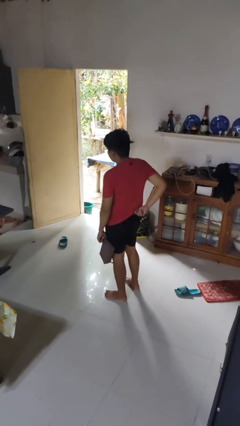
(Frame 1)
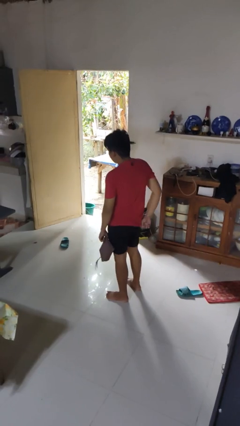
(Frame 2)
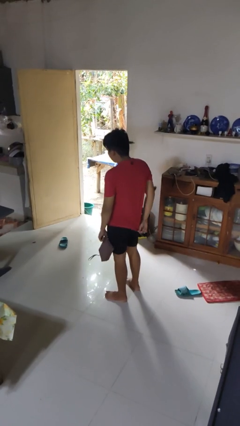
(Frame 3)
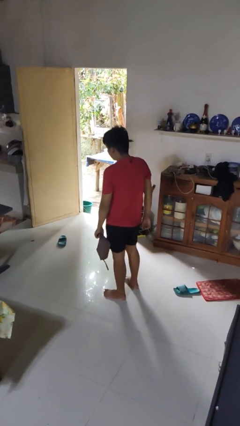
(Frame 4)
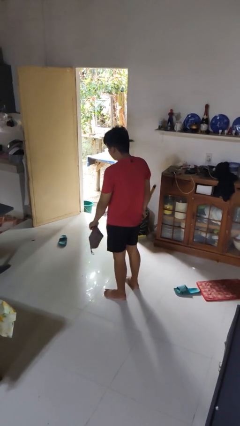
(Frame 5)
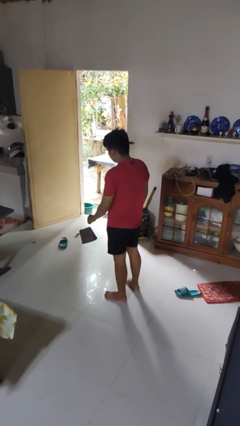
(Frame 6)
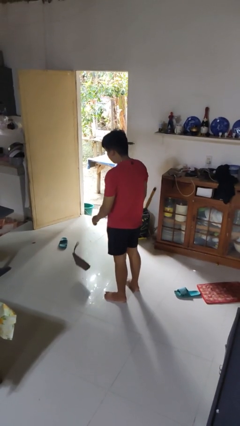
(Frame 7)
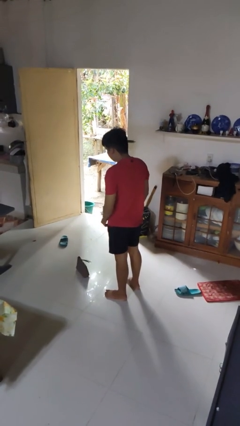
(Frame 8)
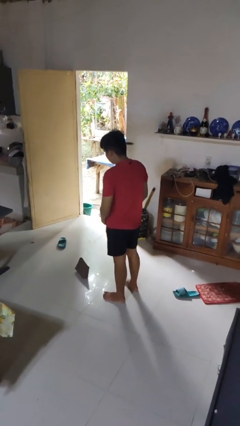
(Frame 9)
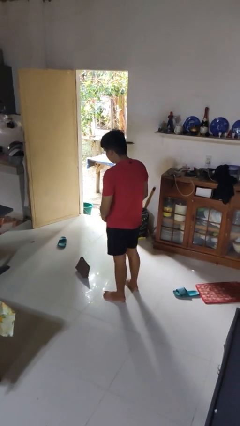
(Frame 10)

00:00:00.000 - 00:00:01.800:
person throws object to ground

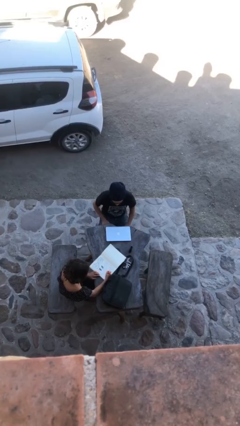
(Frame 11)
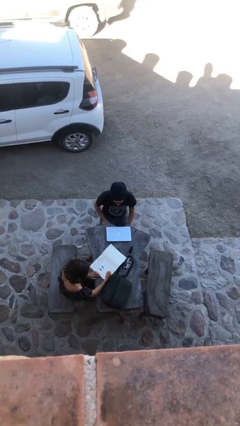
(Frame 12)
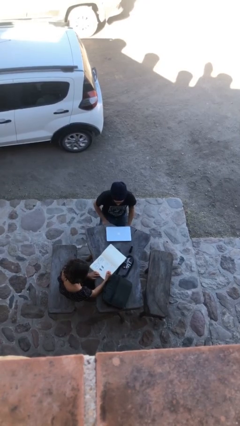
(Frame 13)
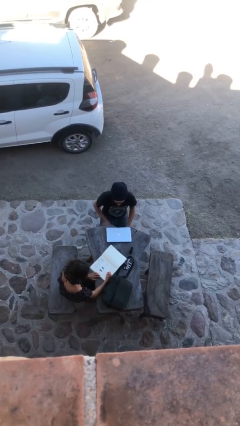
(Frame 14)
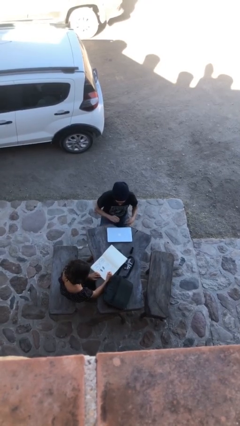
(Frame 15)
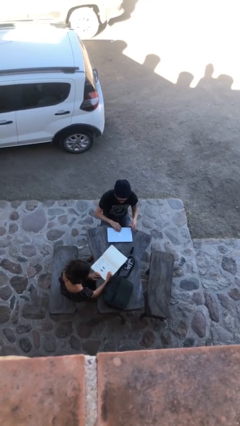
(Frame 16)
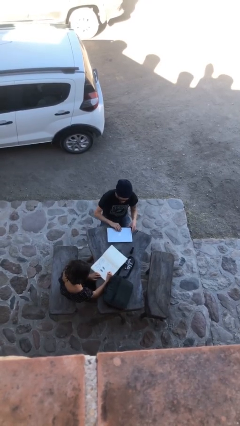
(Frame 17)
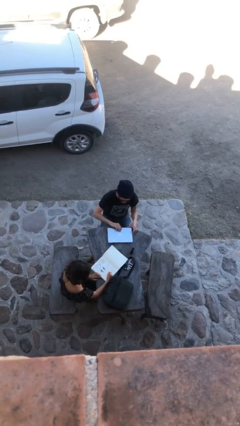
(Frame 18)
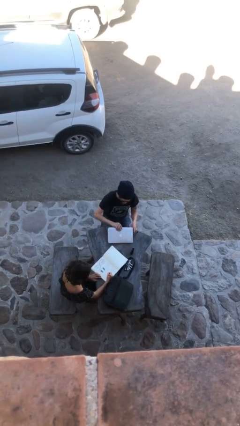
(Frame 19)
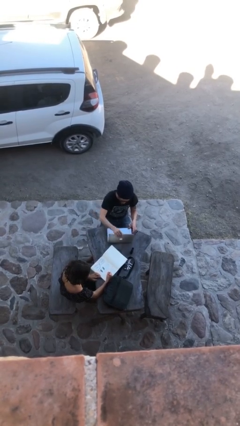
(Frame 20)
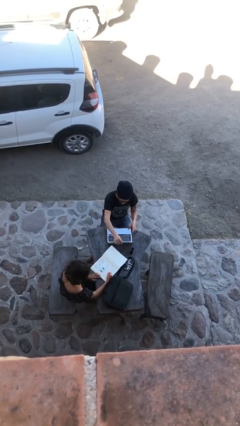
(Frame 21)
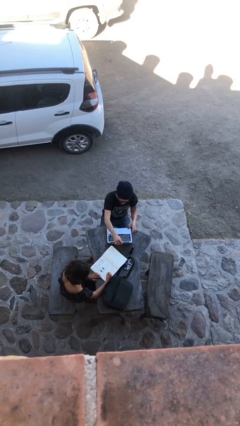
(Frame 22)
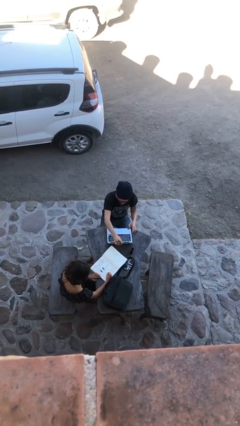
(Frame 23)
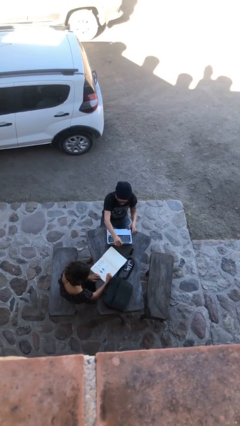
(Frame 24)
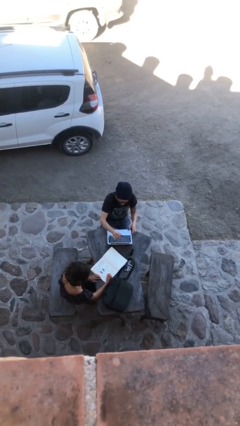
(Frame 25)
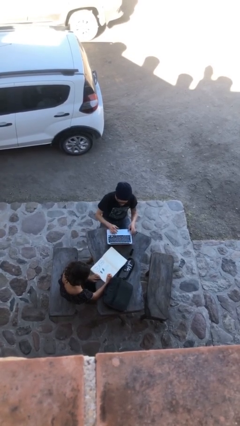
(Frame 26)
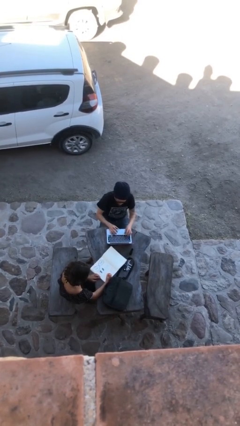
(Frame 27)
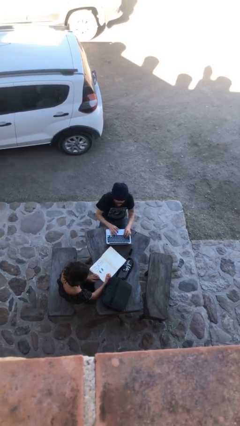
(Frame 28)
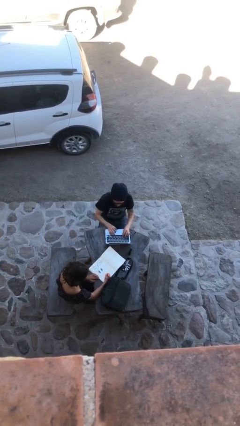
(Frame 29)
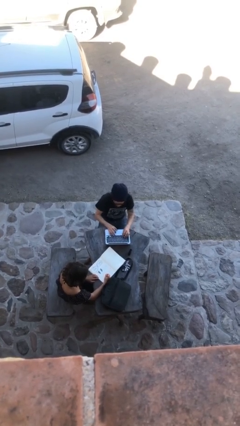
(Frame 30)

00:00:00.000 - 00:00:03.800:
person interacts with laptop

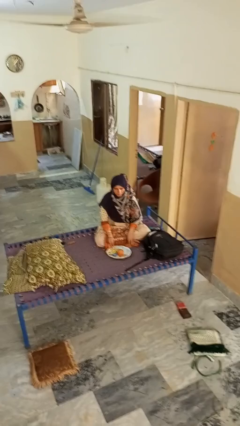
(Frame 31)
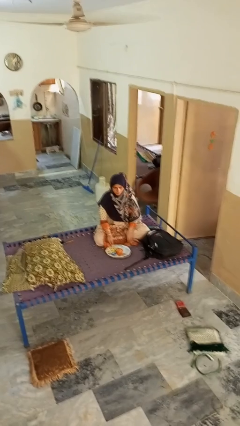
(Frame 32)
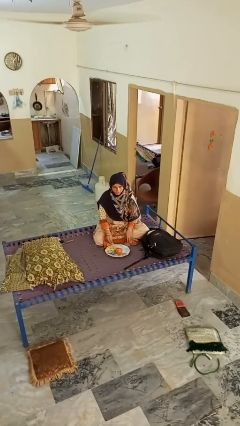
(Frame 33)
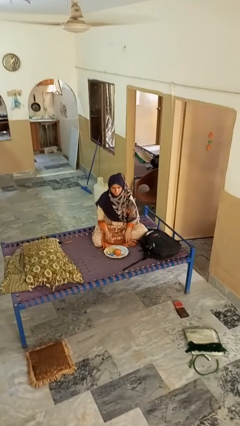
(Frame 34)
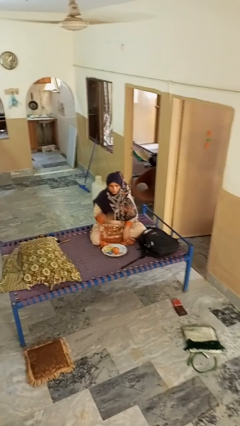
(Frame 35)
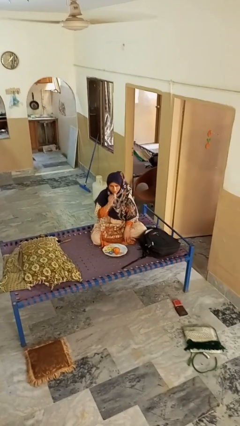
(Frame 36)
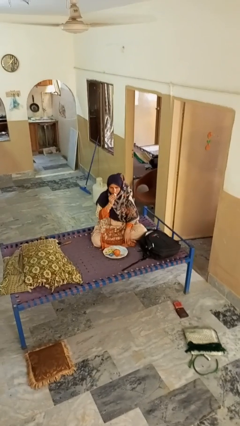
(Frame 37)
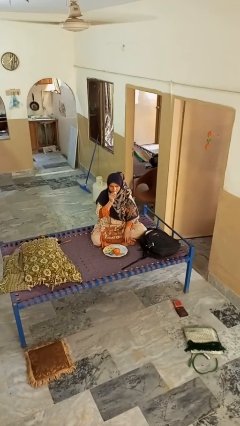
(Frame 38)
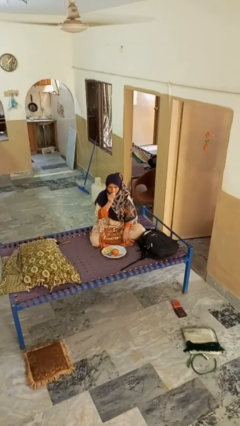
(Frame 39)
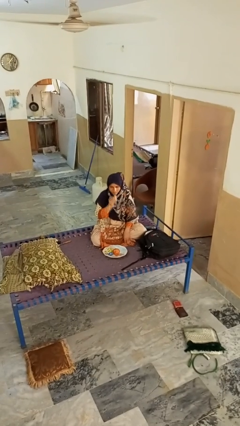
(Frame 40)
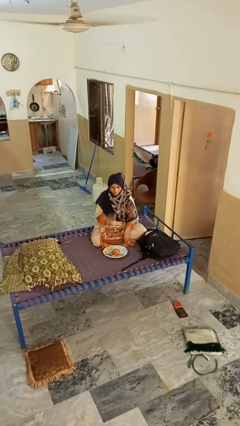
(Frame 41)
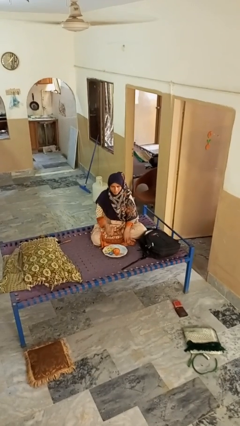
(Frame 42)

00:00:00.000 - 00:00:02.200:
person eats apple

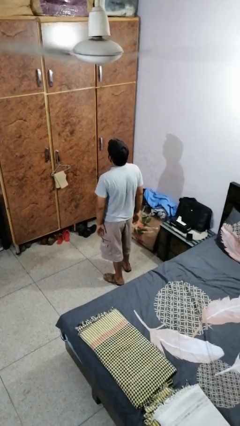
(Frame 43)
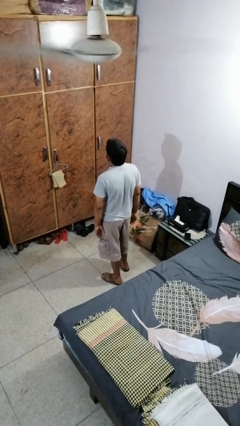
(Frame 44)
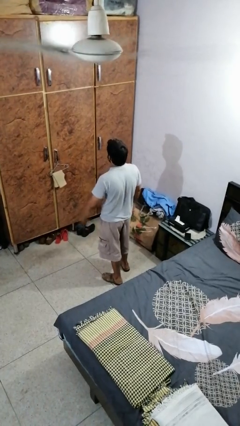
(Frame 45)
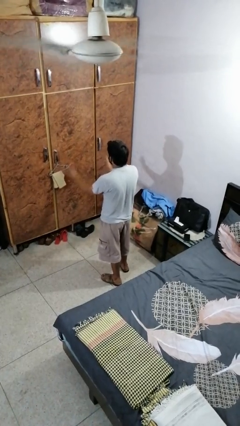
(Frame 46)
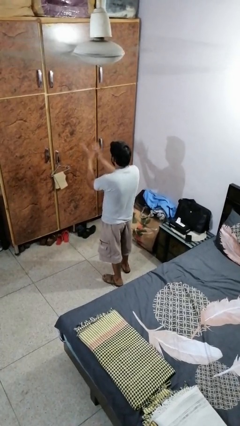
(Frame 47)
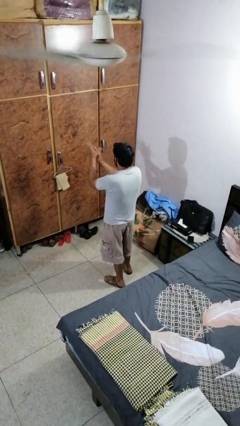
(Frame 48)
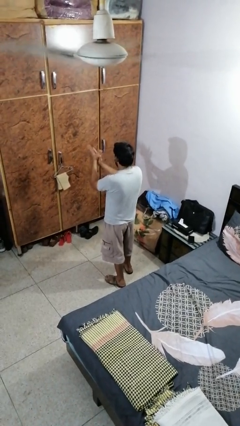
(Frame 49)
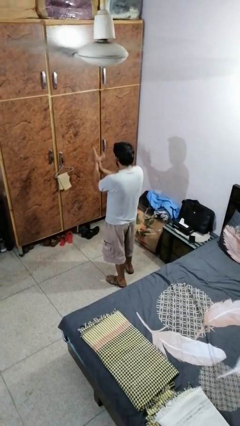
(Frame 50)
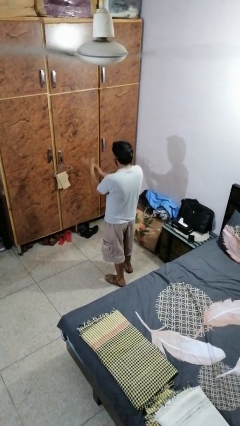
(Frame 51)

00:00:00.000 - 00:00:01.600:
person claps hands

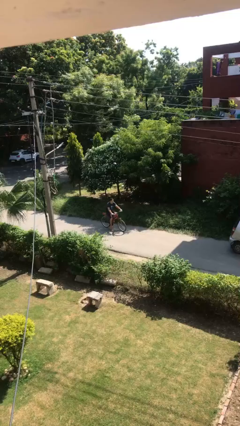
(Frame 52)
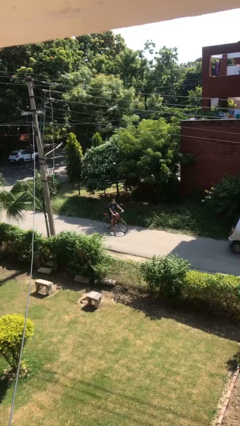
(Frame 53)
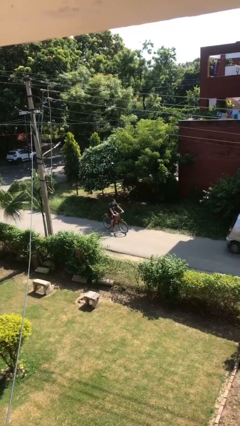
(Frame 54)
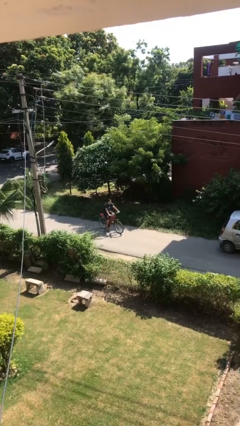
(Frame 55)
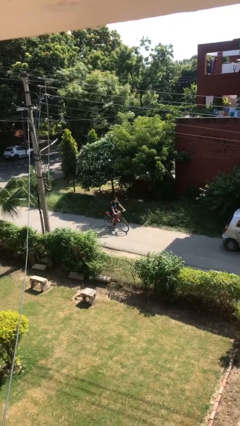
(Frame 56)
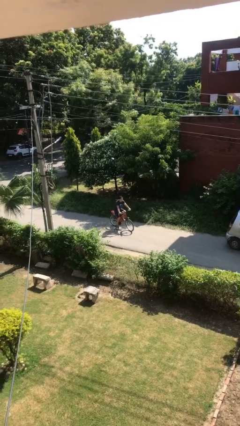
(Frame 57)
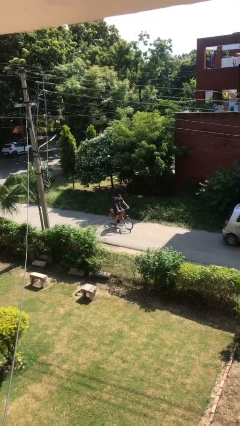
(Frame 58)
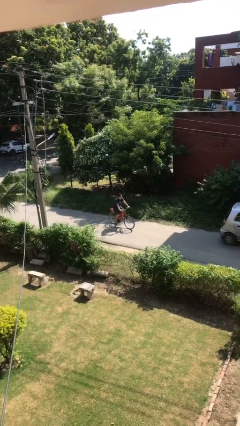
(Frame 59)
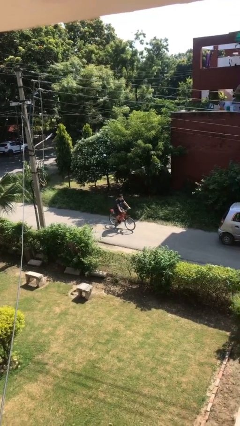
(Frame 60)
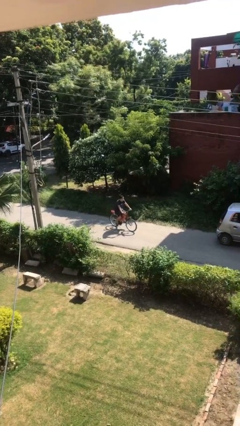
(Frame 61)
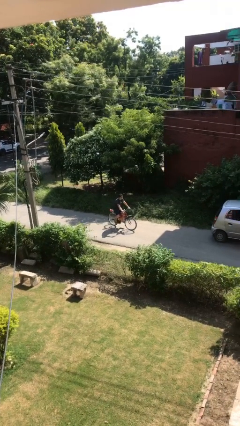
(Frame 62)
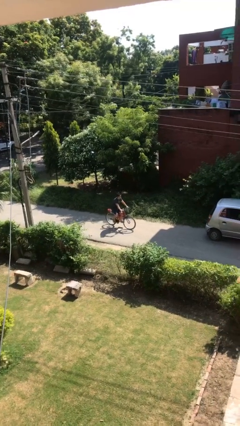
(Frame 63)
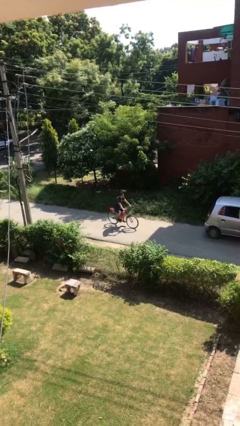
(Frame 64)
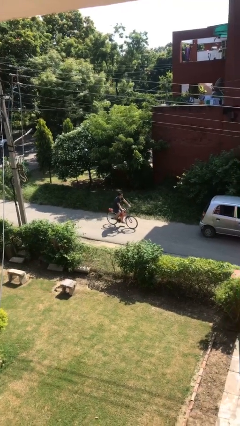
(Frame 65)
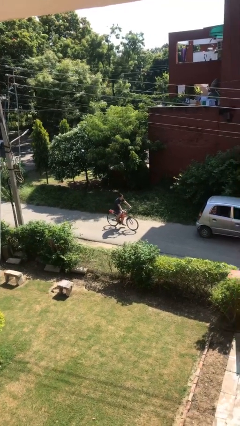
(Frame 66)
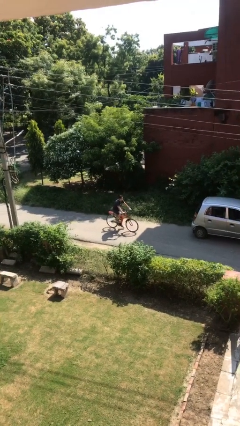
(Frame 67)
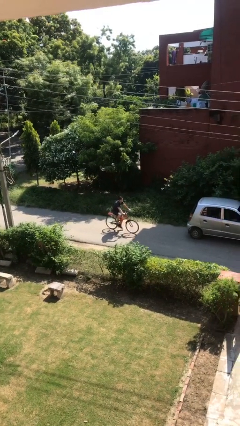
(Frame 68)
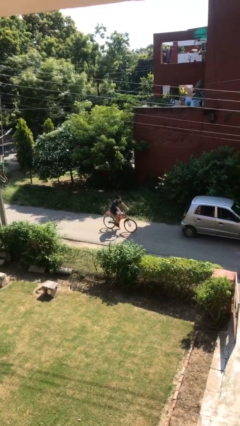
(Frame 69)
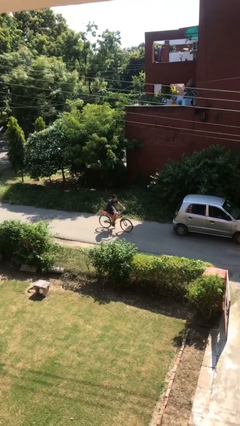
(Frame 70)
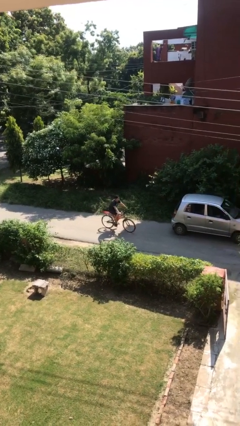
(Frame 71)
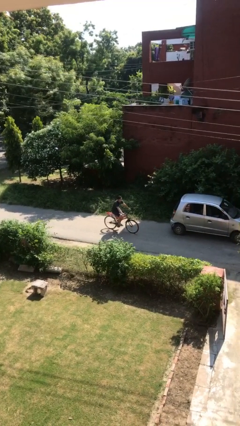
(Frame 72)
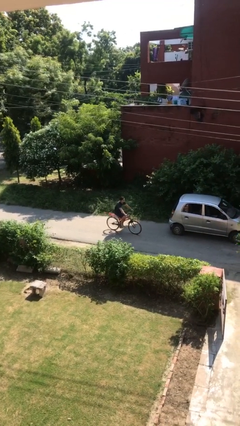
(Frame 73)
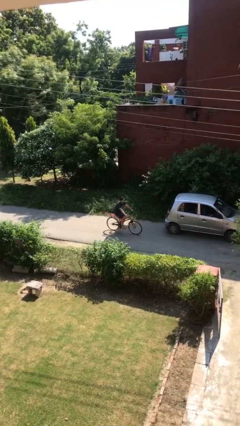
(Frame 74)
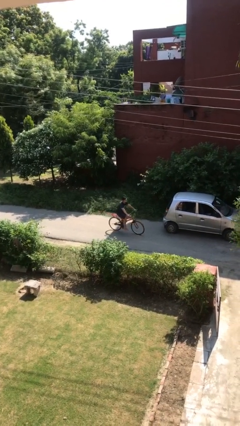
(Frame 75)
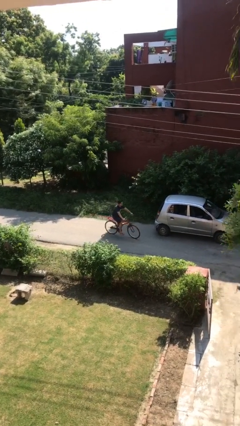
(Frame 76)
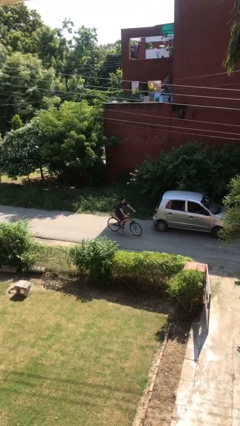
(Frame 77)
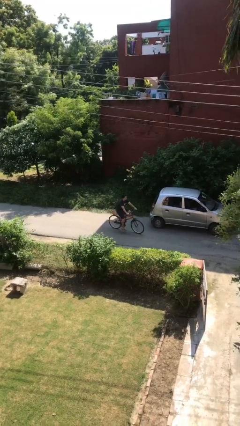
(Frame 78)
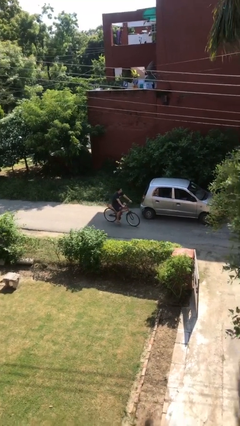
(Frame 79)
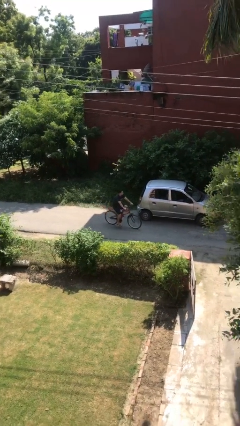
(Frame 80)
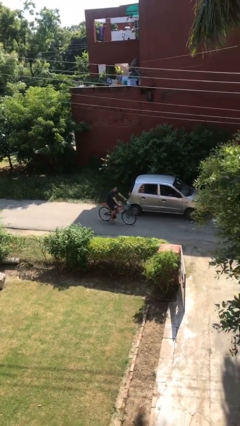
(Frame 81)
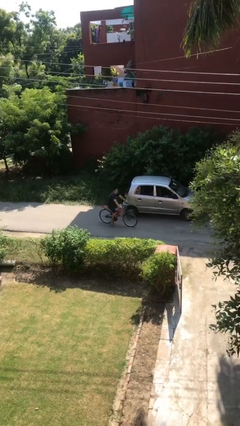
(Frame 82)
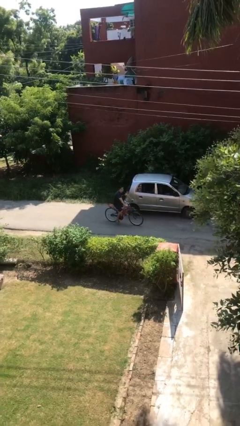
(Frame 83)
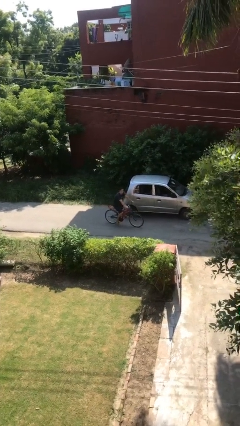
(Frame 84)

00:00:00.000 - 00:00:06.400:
person rides bicycle

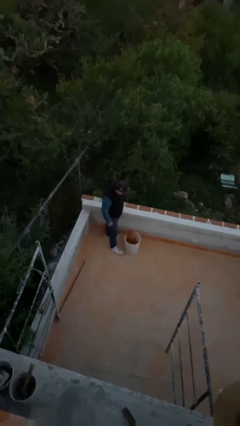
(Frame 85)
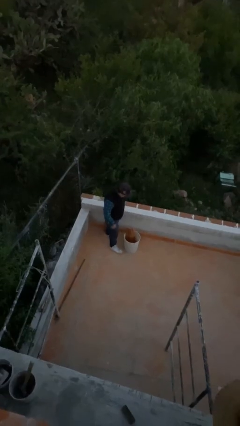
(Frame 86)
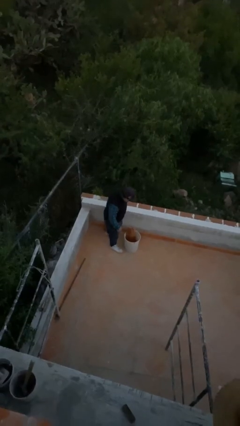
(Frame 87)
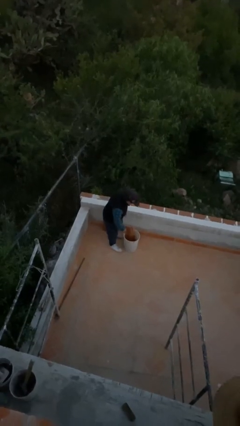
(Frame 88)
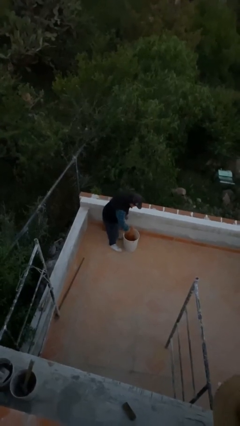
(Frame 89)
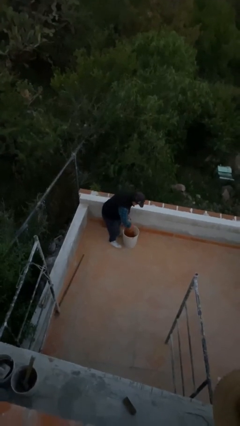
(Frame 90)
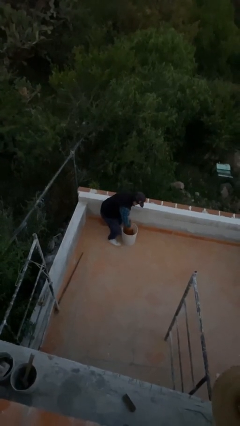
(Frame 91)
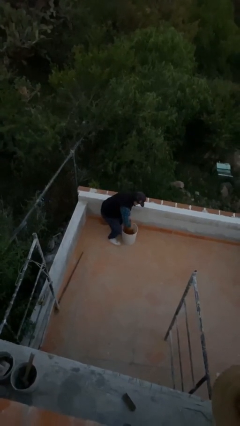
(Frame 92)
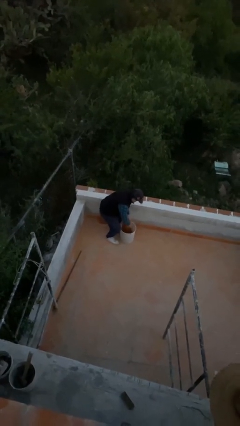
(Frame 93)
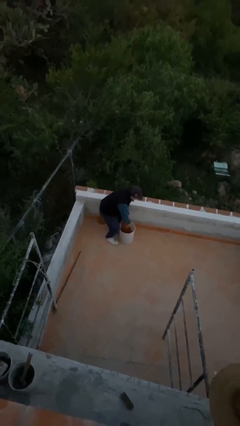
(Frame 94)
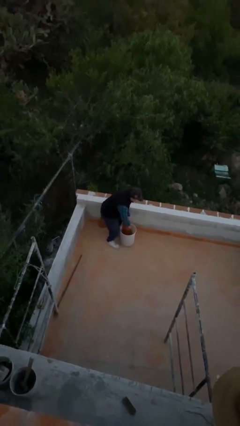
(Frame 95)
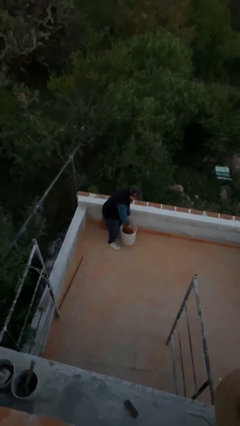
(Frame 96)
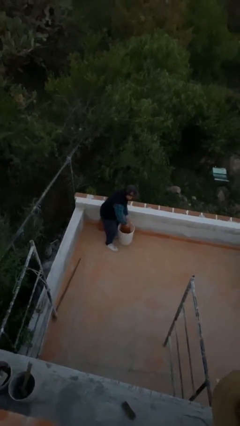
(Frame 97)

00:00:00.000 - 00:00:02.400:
person picks up object from floor
